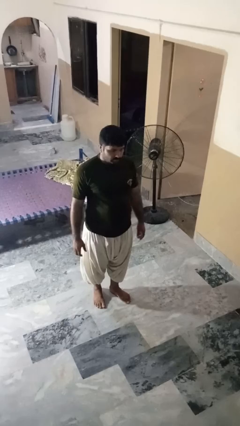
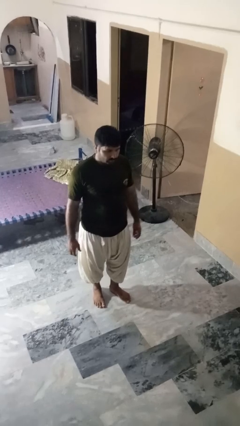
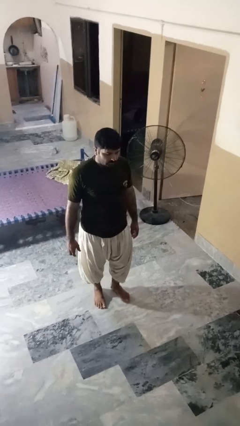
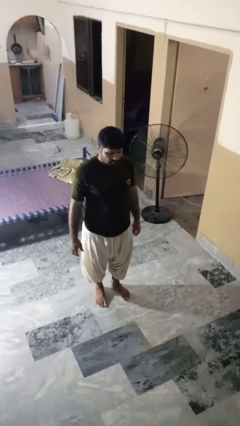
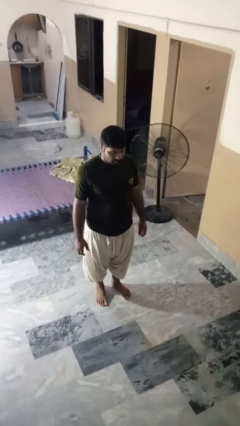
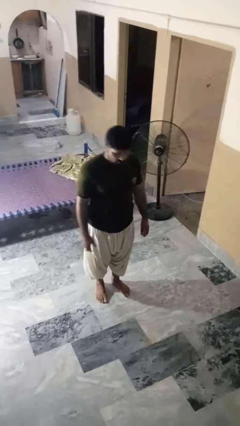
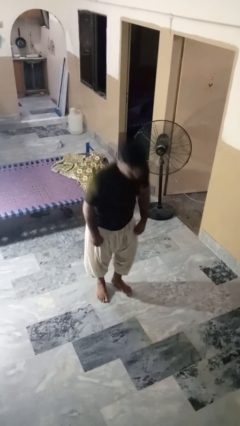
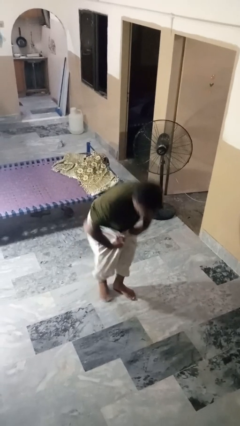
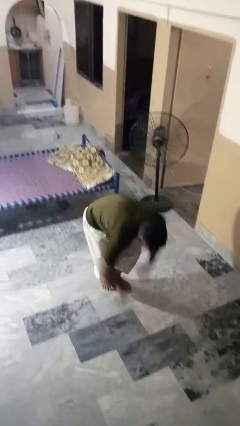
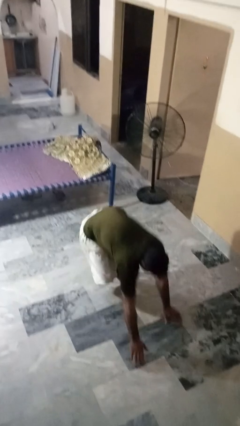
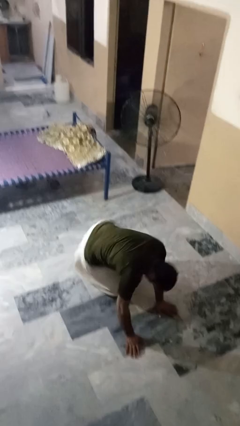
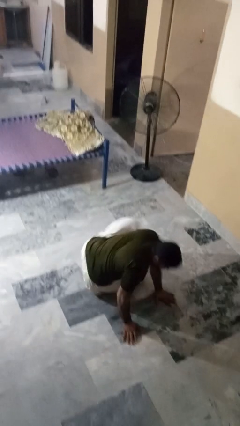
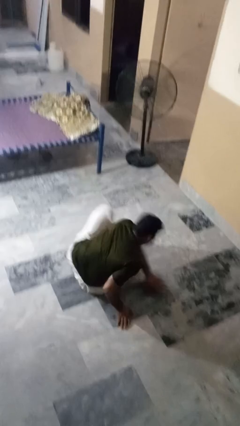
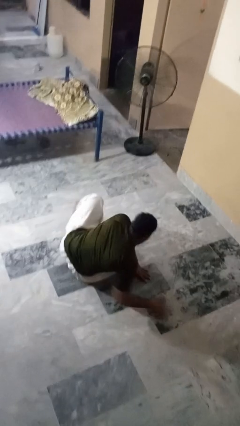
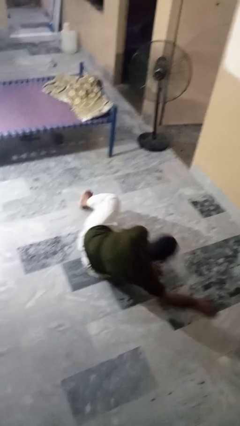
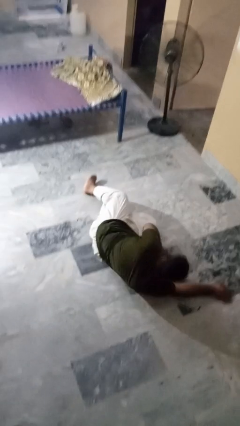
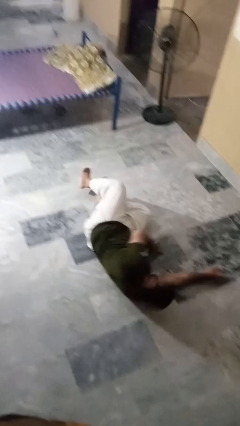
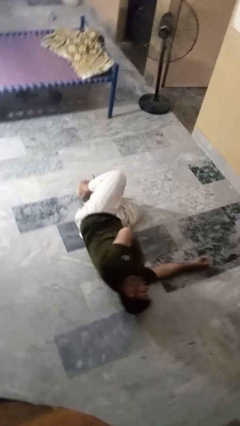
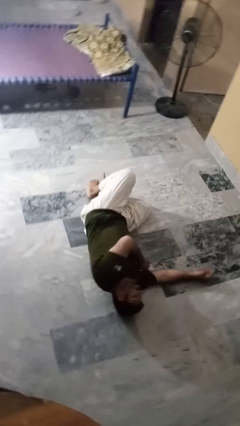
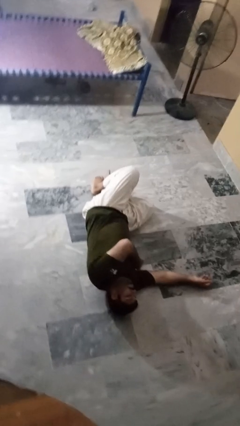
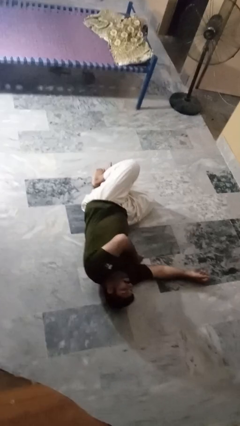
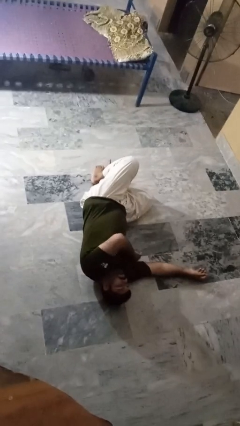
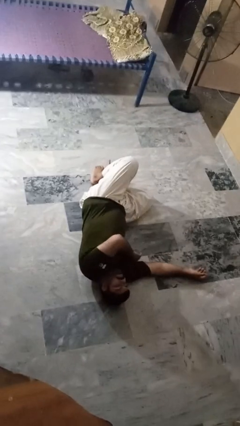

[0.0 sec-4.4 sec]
person falls while standing

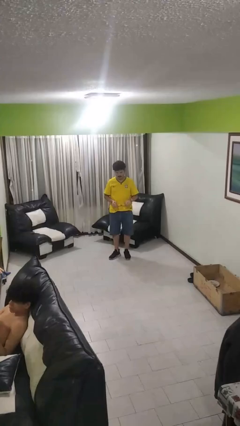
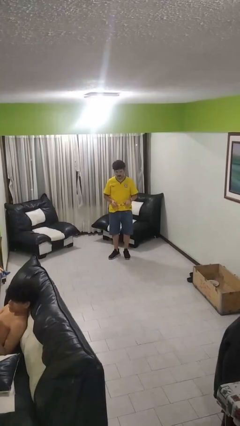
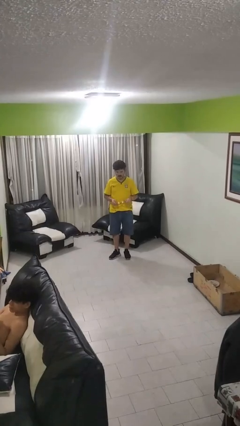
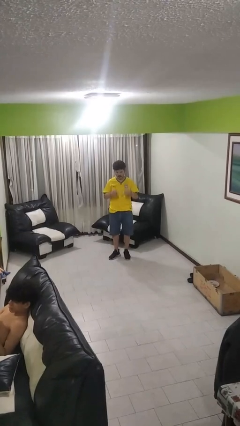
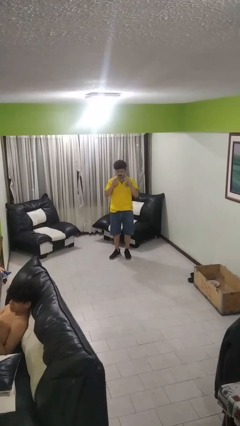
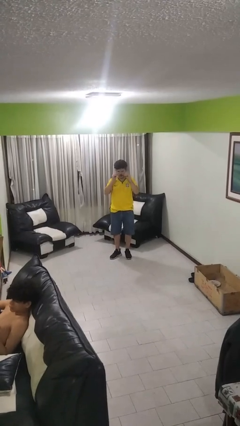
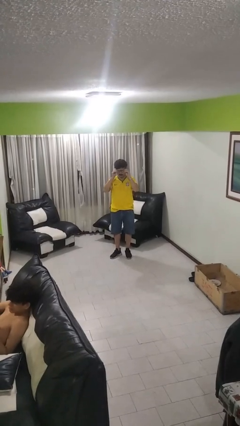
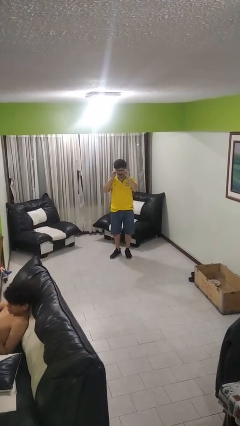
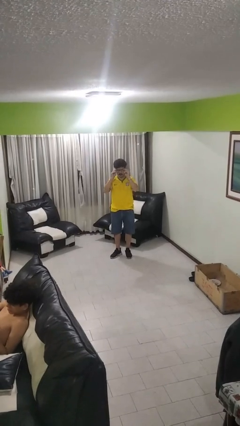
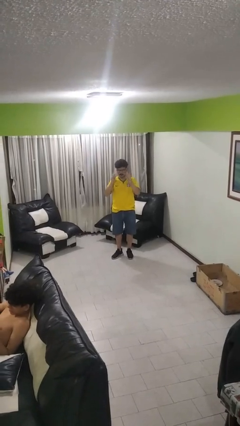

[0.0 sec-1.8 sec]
person puts on glasses

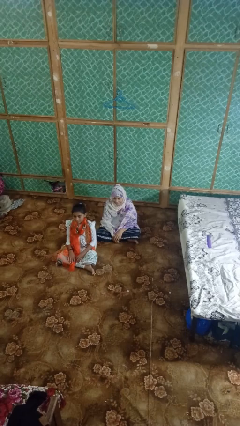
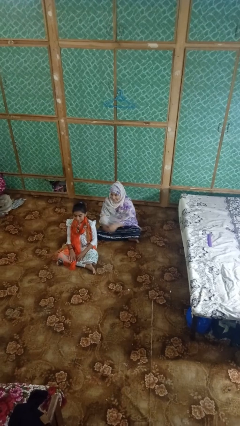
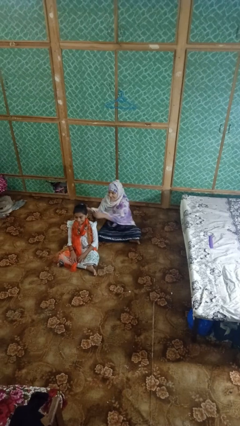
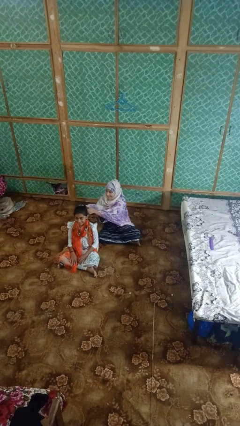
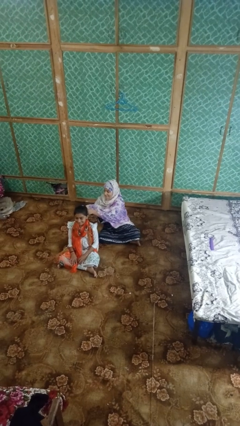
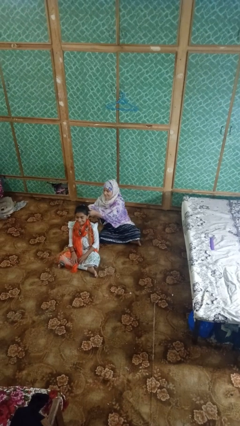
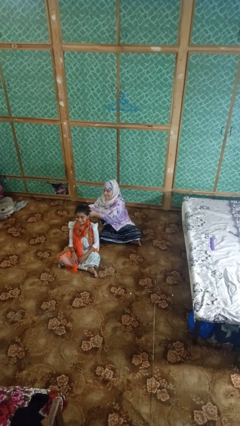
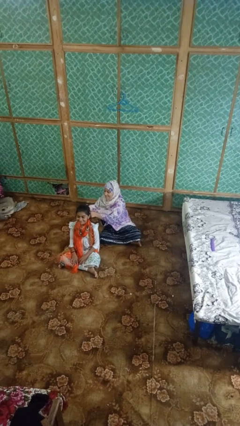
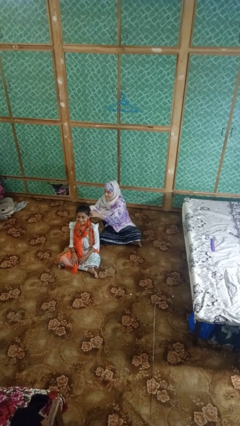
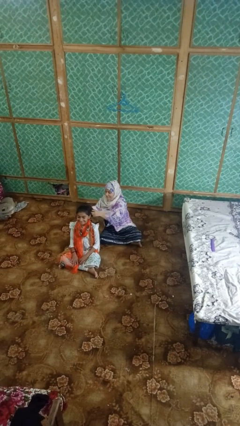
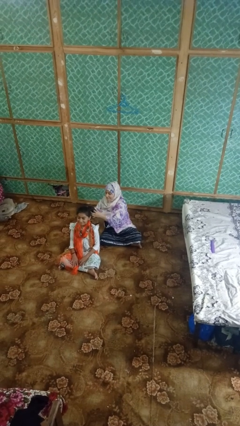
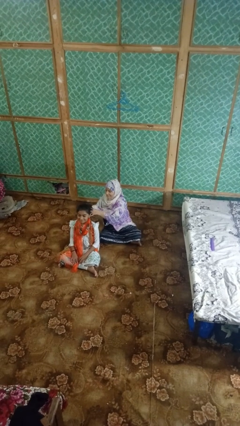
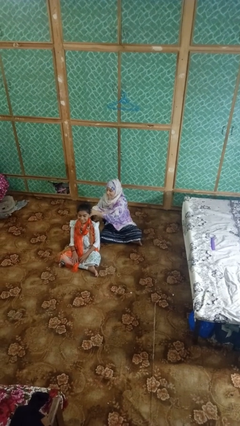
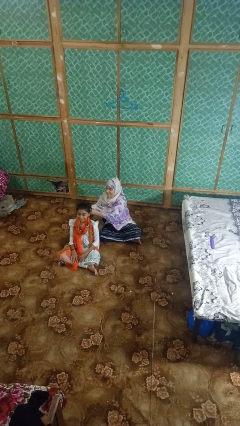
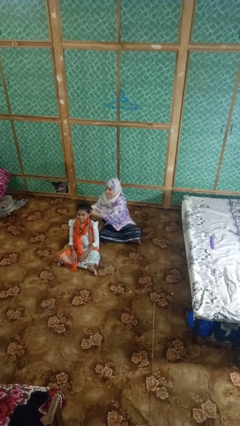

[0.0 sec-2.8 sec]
person braids hair of person

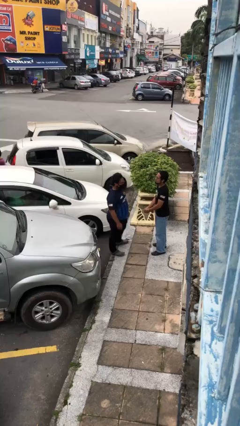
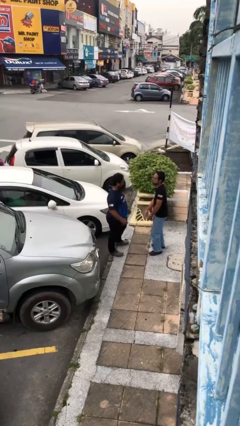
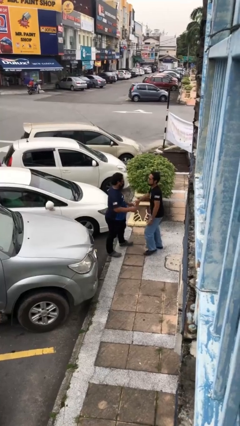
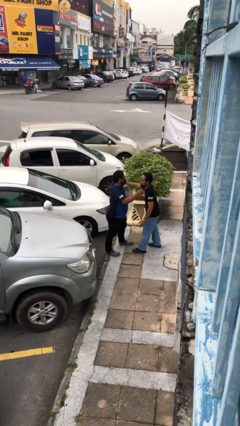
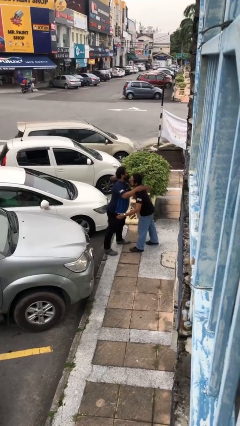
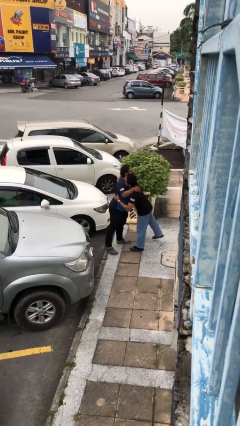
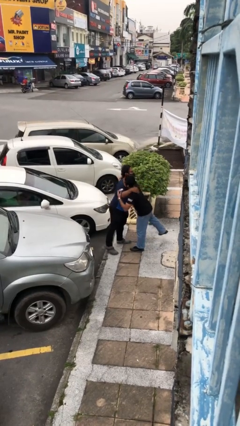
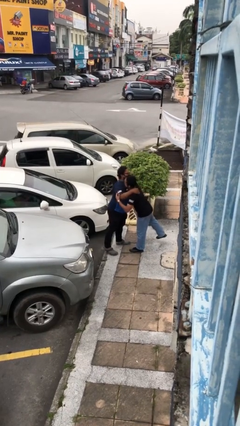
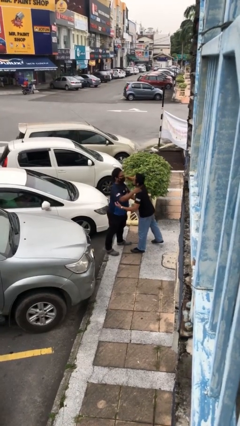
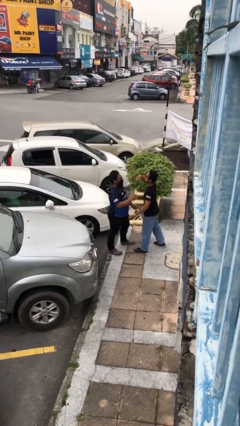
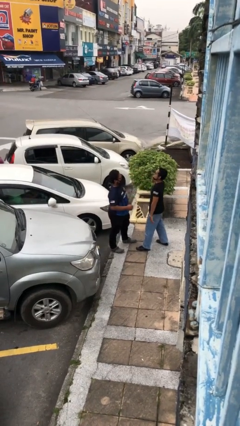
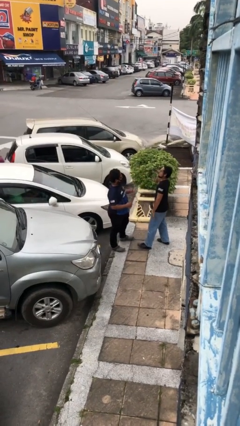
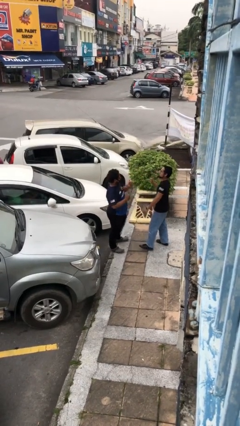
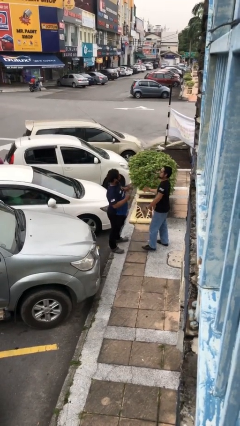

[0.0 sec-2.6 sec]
person embraces person

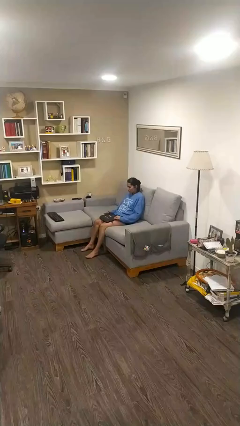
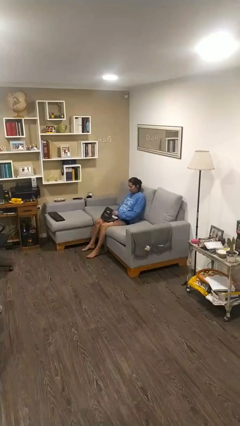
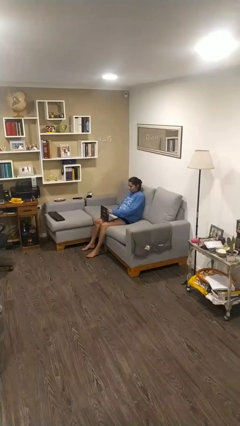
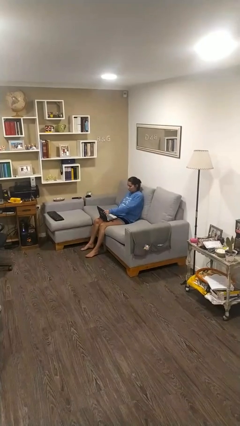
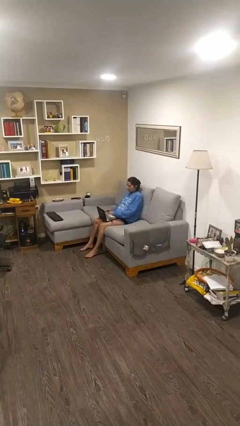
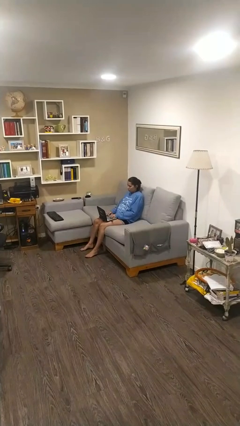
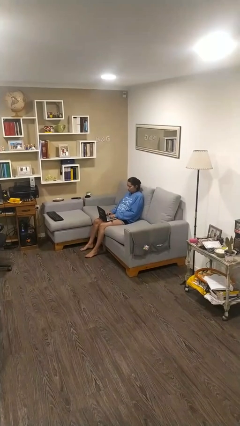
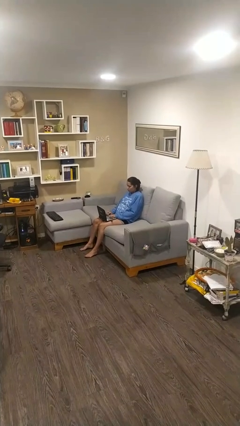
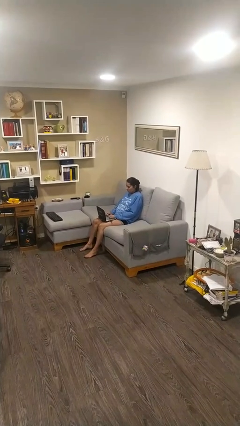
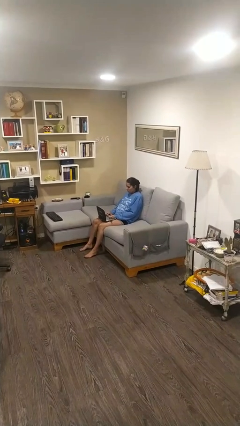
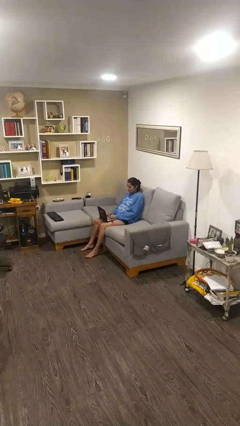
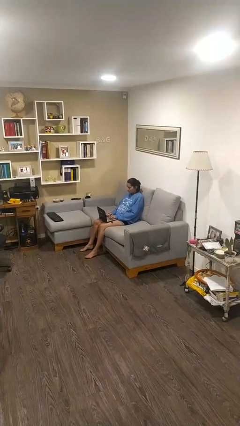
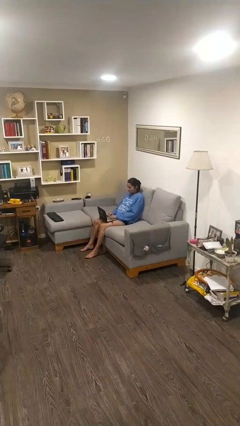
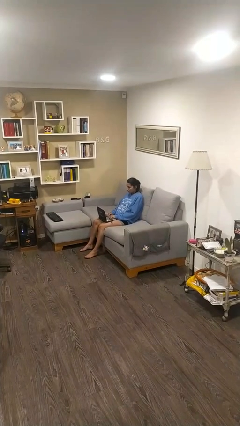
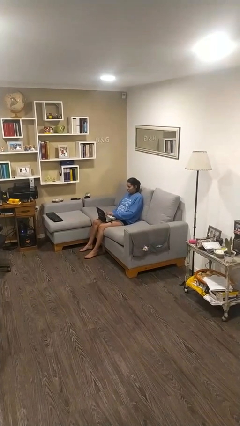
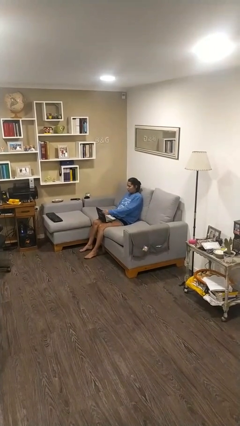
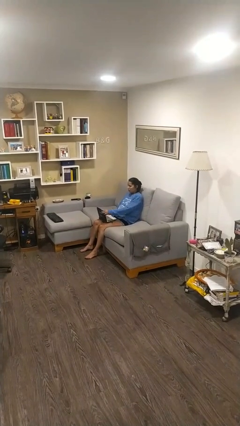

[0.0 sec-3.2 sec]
person interacts with laptop

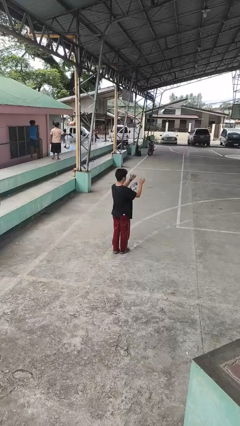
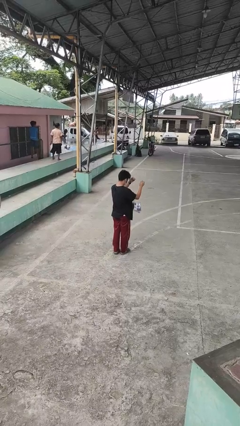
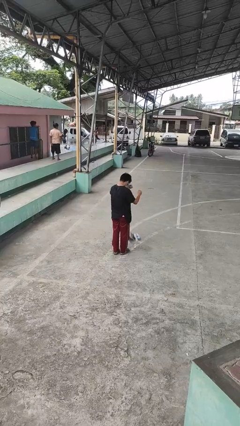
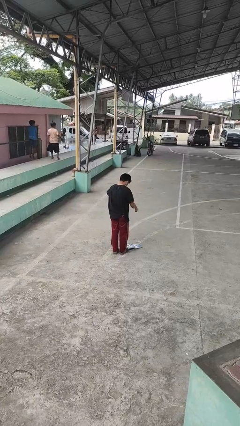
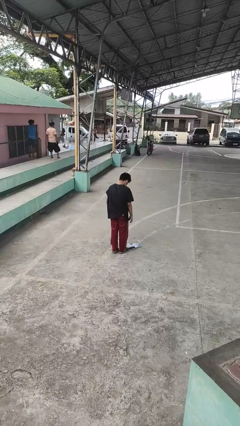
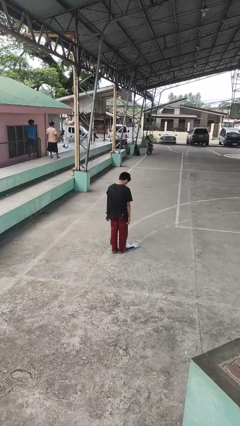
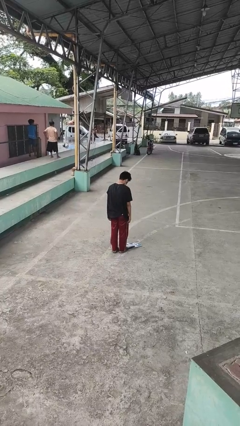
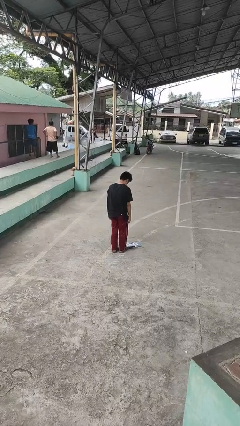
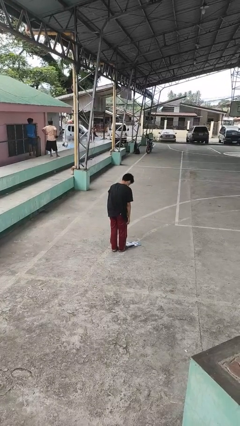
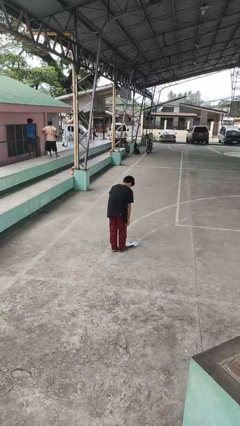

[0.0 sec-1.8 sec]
person drops object

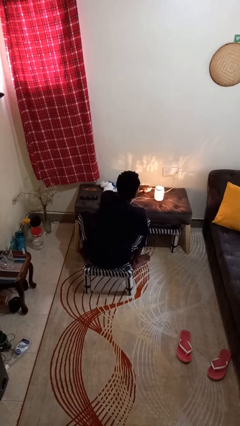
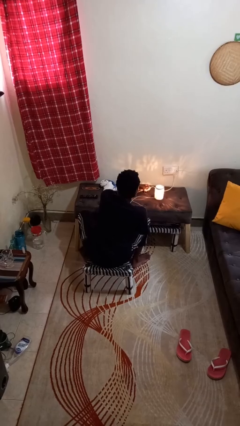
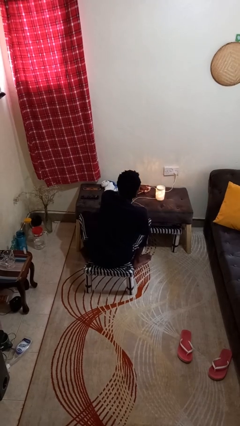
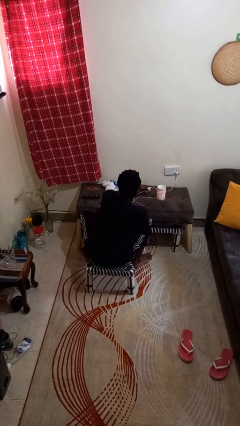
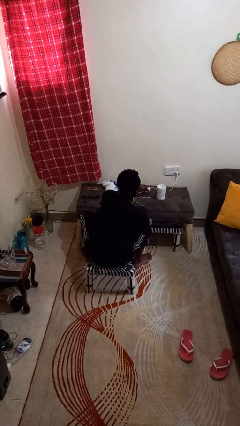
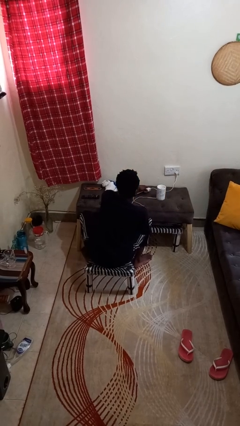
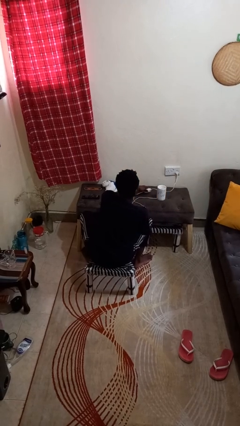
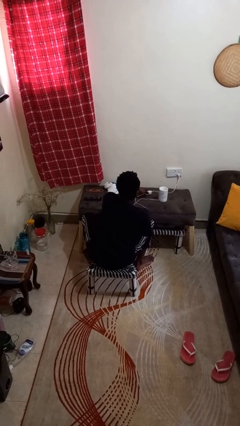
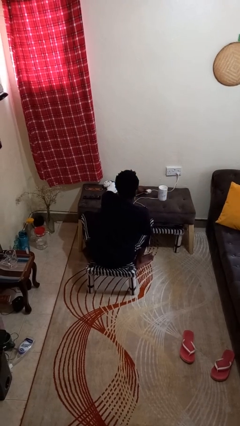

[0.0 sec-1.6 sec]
person turns off fan
